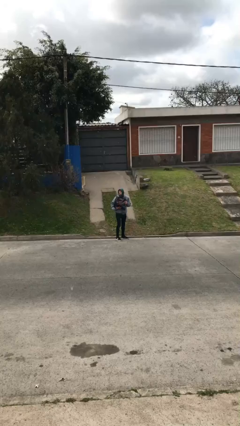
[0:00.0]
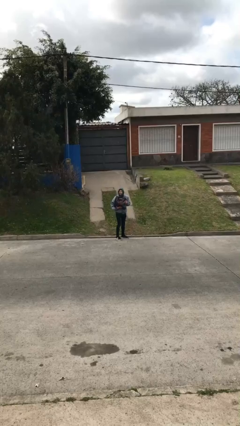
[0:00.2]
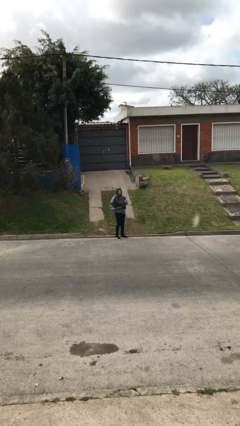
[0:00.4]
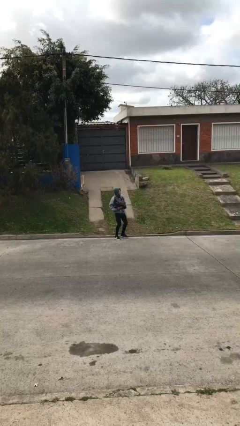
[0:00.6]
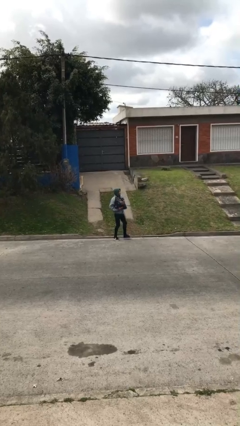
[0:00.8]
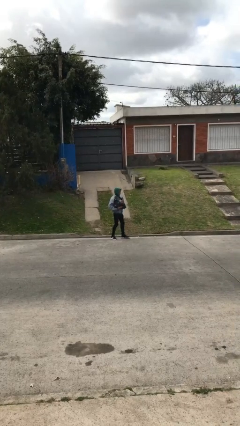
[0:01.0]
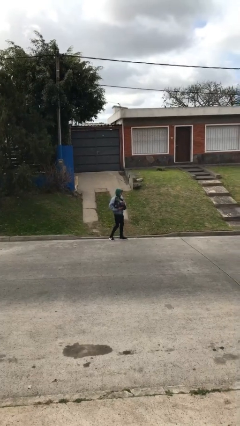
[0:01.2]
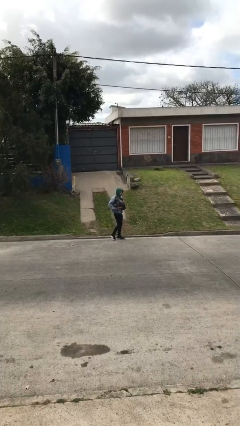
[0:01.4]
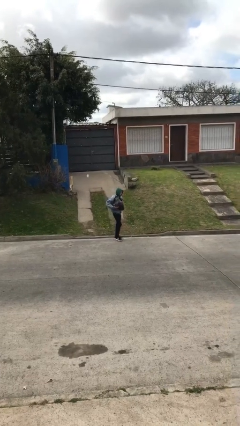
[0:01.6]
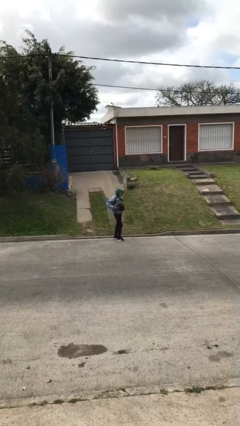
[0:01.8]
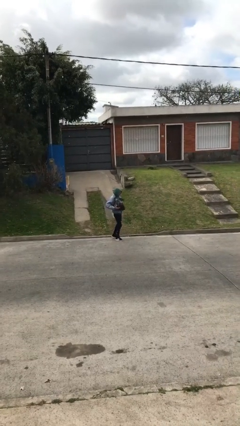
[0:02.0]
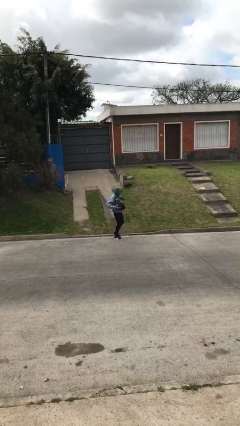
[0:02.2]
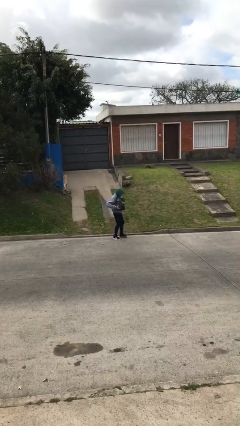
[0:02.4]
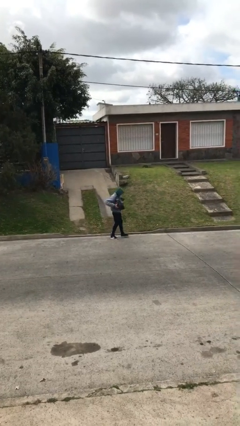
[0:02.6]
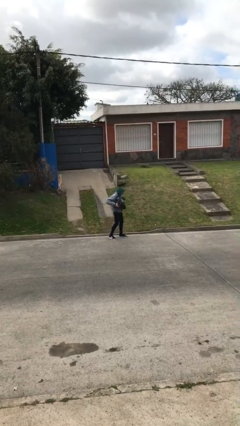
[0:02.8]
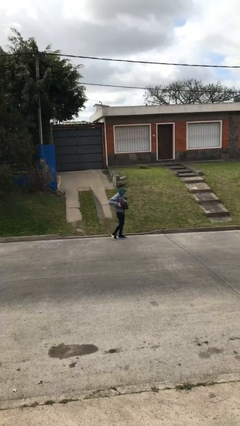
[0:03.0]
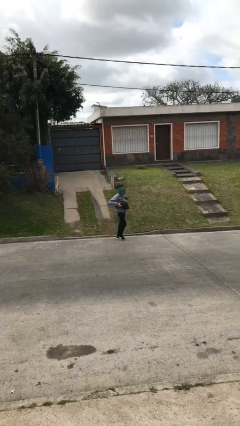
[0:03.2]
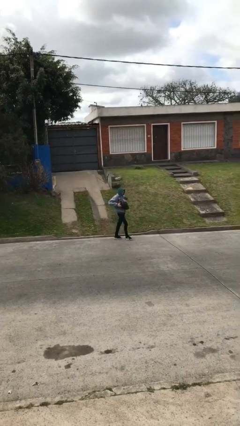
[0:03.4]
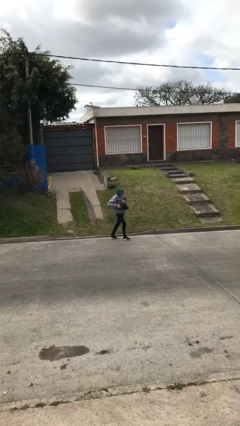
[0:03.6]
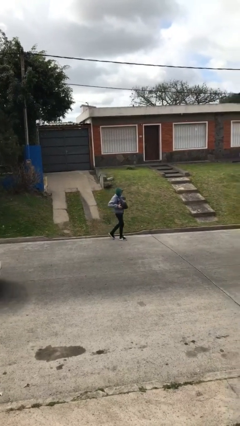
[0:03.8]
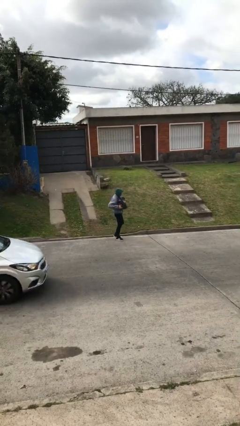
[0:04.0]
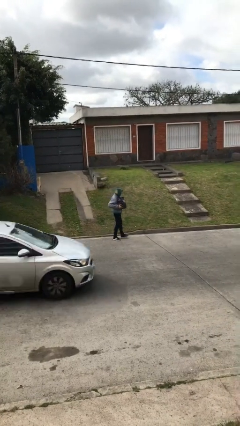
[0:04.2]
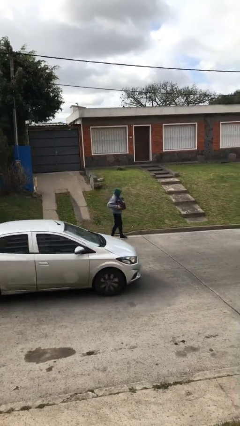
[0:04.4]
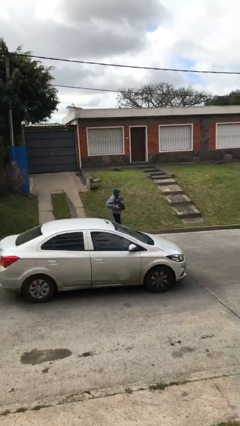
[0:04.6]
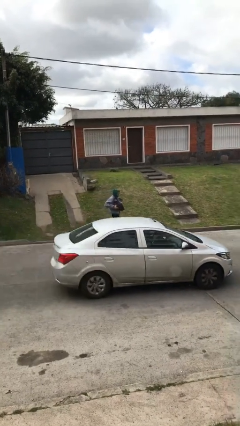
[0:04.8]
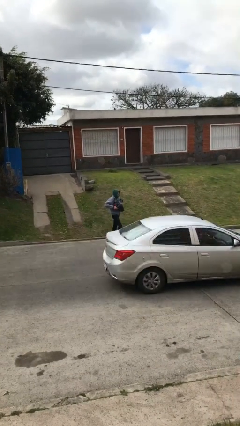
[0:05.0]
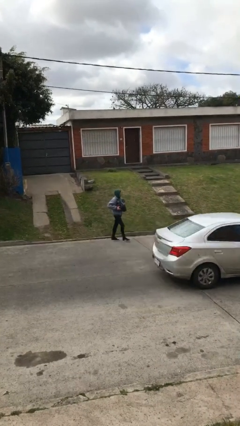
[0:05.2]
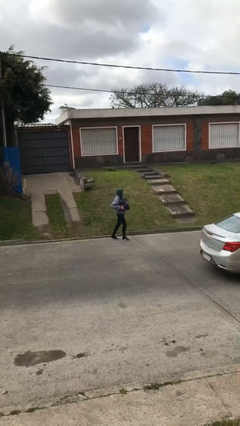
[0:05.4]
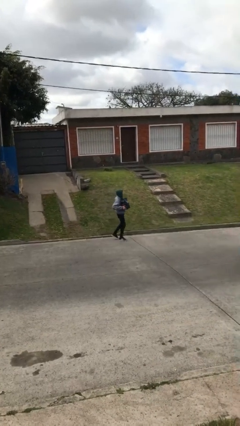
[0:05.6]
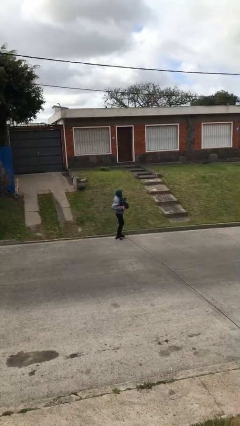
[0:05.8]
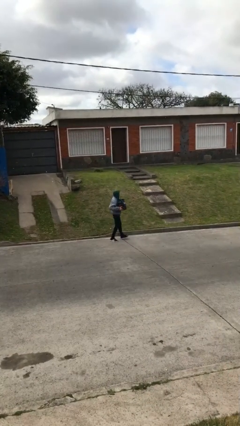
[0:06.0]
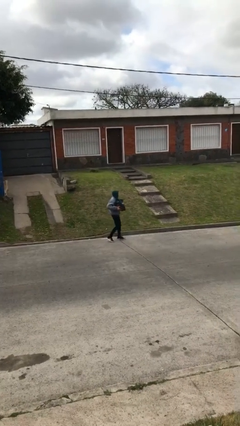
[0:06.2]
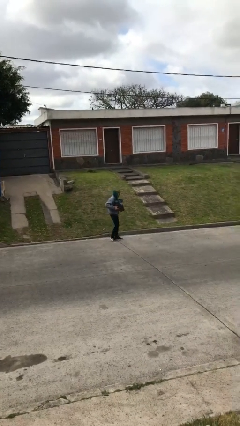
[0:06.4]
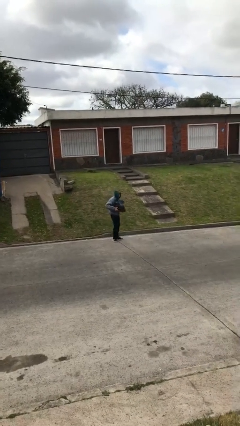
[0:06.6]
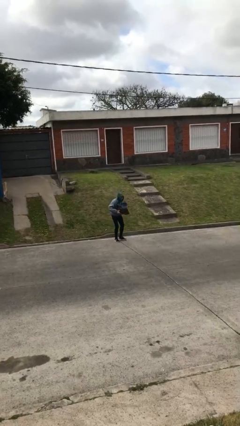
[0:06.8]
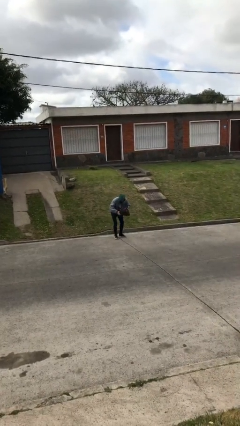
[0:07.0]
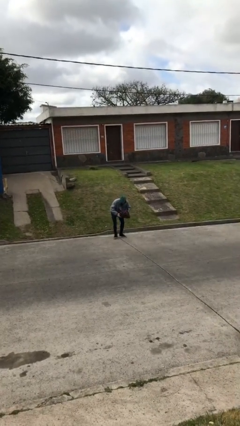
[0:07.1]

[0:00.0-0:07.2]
person carries heavy object

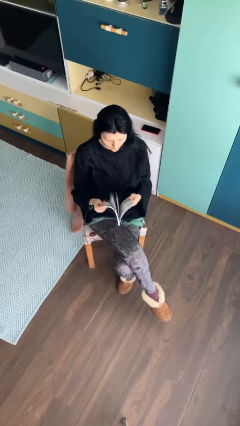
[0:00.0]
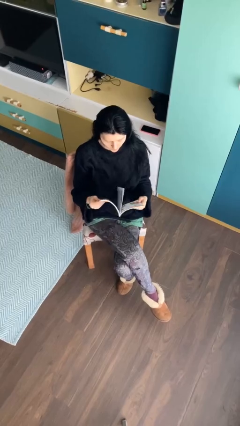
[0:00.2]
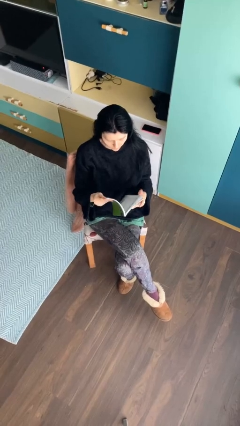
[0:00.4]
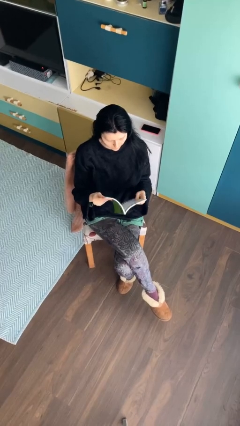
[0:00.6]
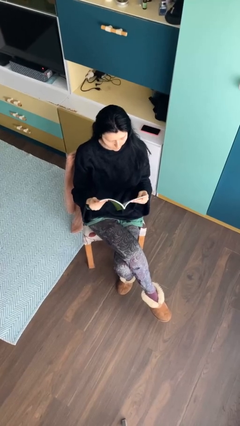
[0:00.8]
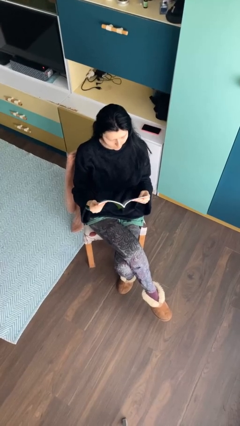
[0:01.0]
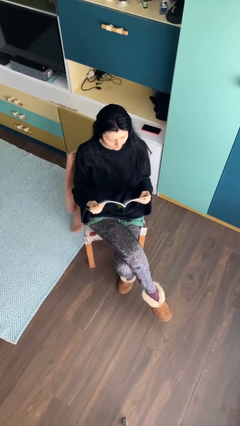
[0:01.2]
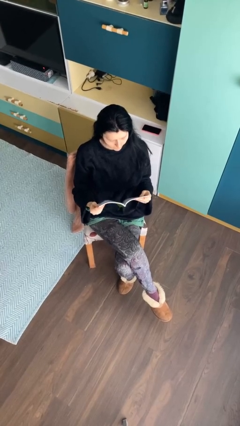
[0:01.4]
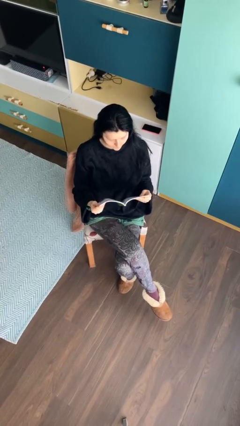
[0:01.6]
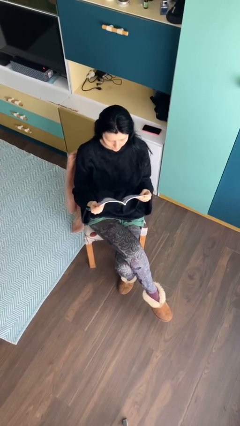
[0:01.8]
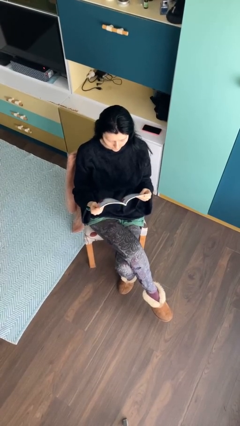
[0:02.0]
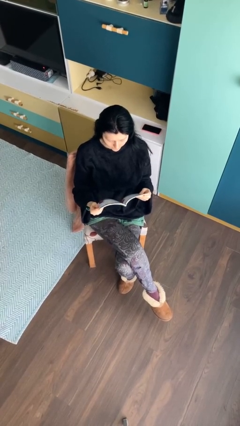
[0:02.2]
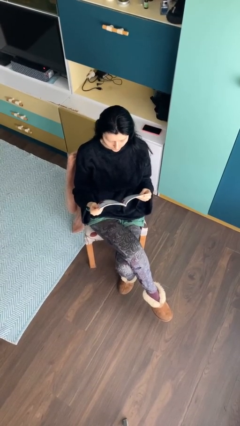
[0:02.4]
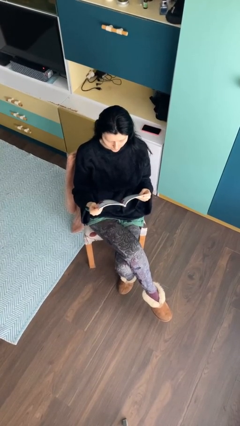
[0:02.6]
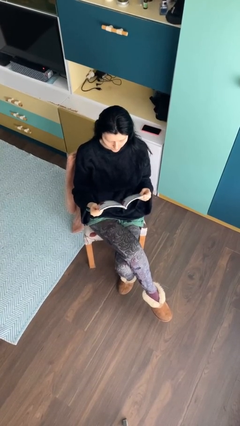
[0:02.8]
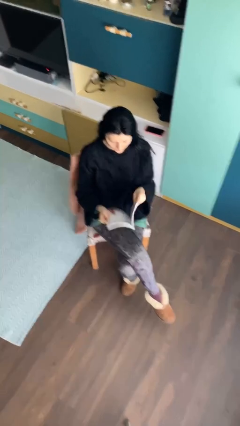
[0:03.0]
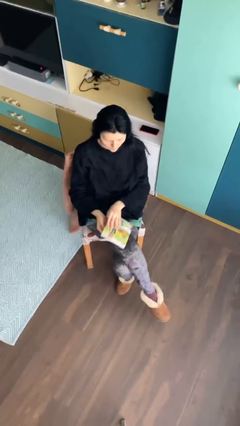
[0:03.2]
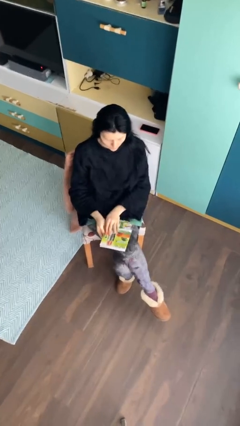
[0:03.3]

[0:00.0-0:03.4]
person reads document

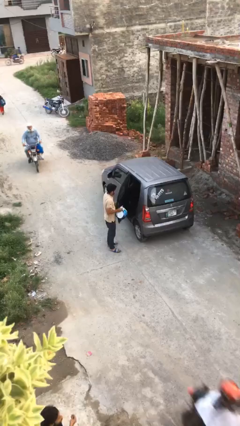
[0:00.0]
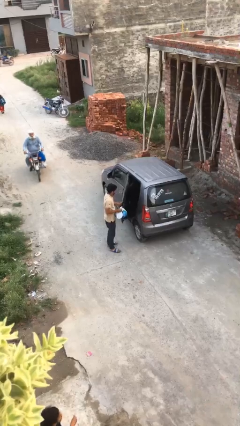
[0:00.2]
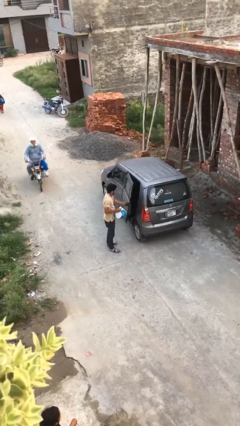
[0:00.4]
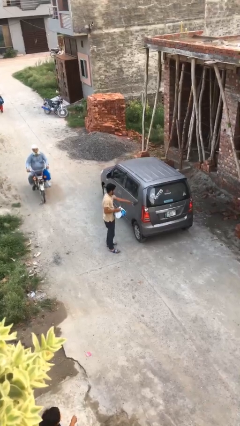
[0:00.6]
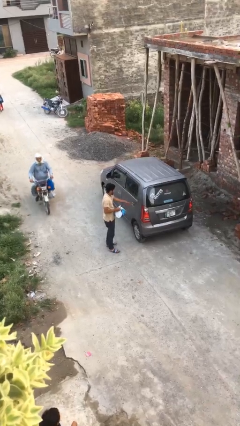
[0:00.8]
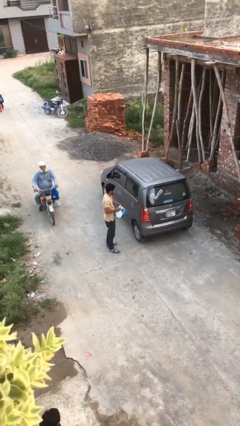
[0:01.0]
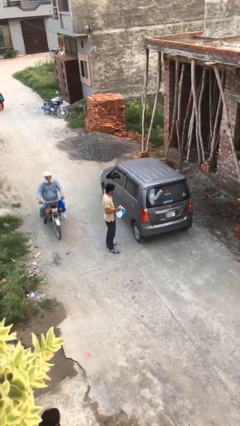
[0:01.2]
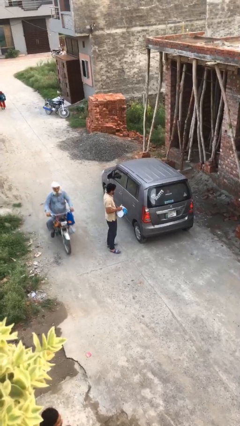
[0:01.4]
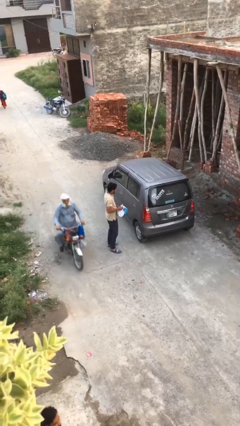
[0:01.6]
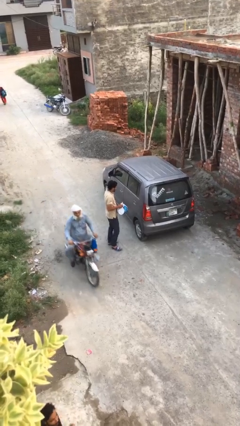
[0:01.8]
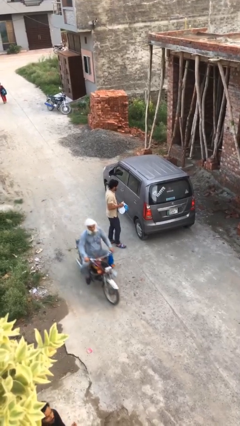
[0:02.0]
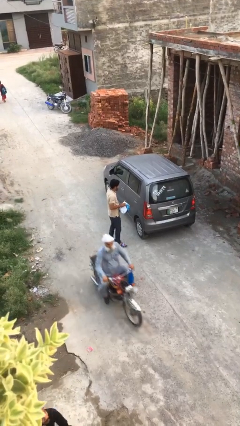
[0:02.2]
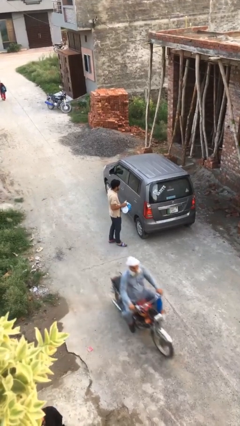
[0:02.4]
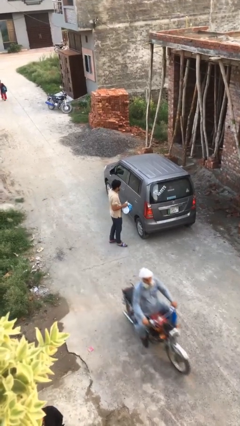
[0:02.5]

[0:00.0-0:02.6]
person closes car door

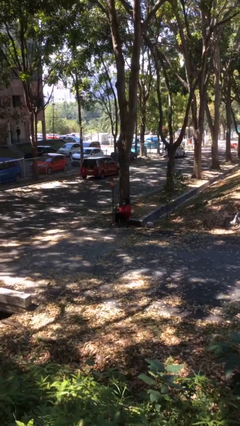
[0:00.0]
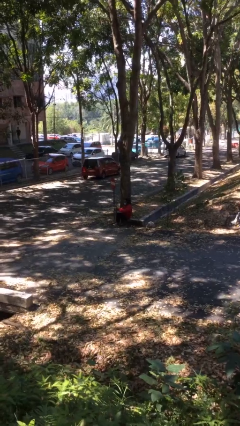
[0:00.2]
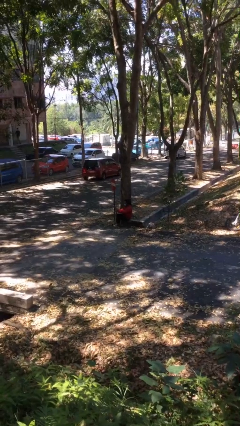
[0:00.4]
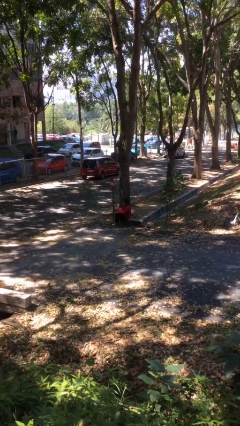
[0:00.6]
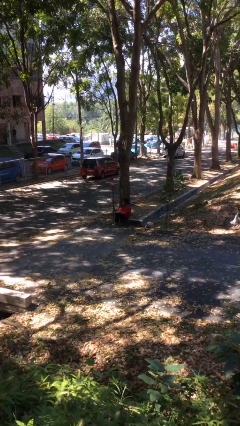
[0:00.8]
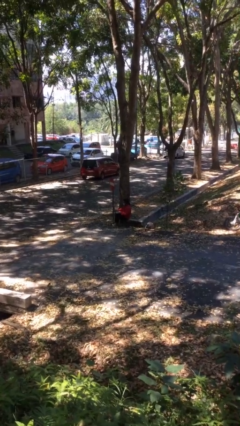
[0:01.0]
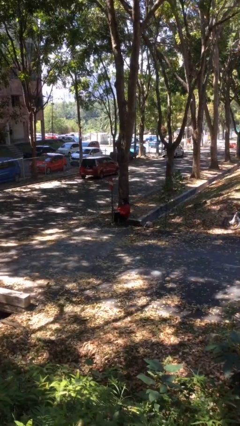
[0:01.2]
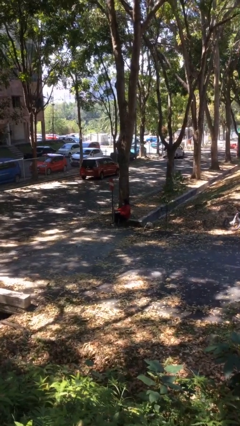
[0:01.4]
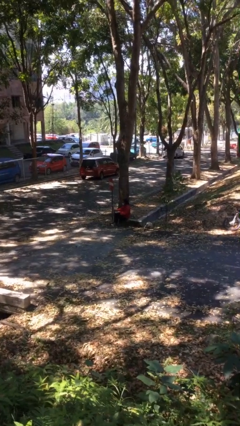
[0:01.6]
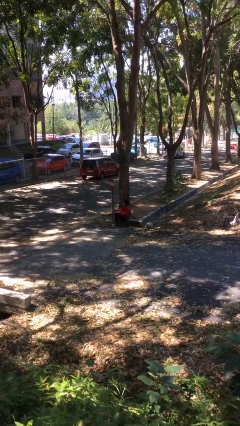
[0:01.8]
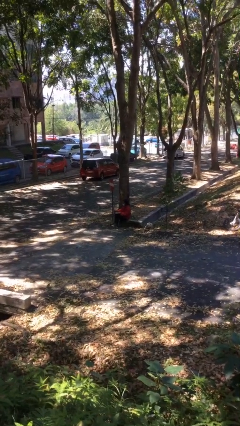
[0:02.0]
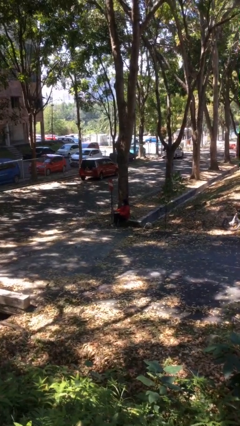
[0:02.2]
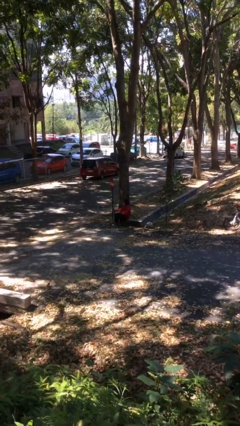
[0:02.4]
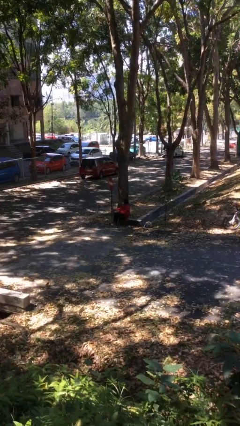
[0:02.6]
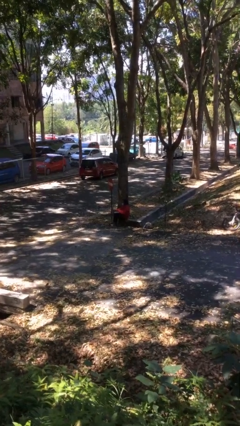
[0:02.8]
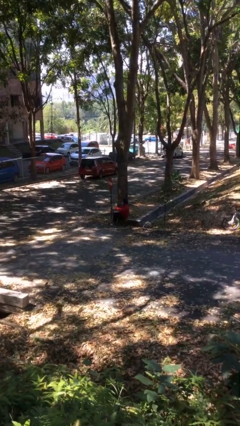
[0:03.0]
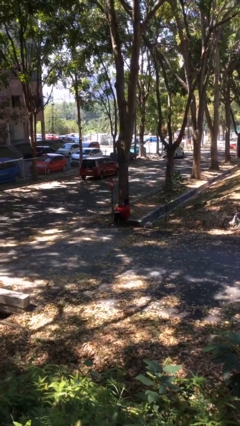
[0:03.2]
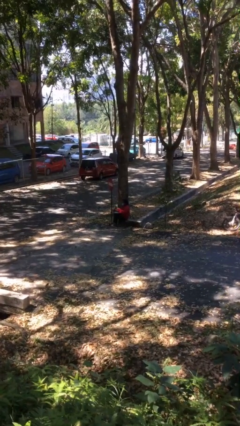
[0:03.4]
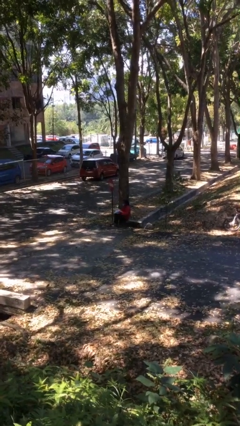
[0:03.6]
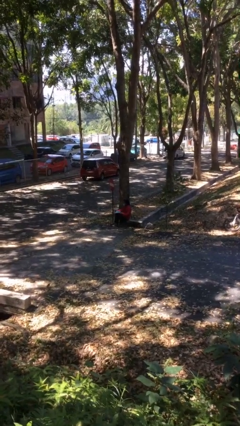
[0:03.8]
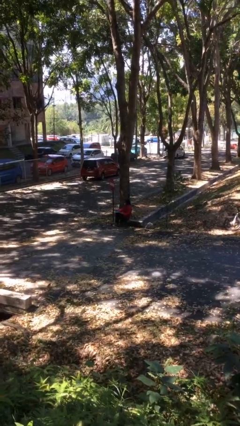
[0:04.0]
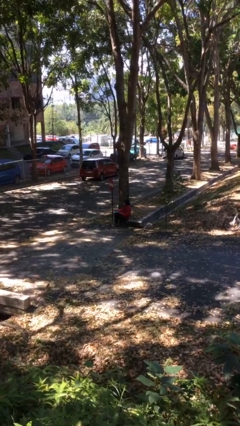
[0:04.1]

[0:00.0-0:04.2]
person interacts with laptop

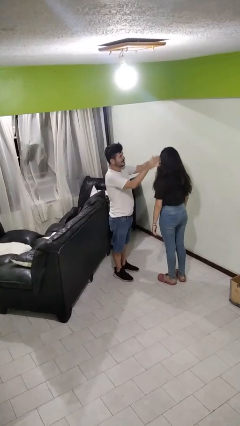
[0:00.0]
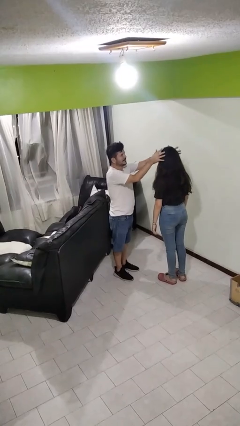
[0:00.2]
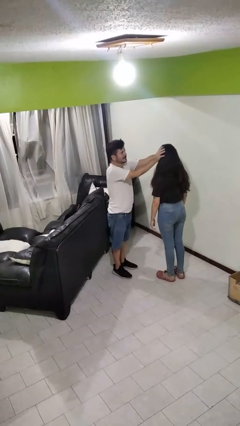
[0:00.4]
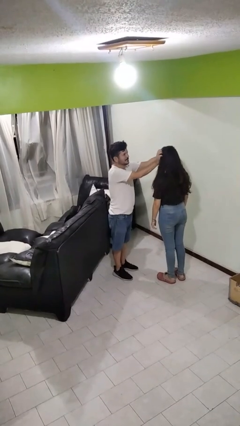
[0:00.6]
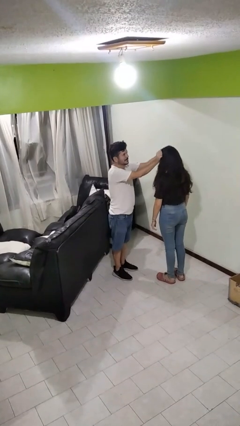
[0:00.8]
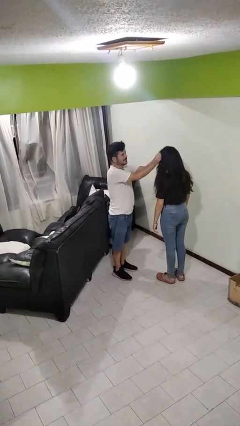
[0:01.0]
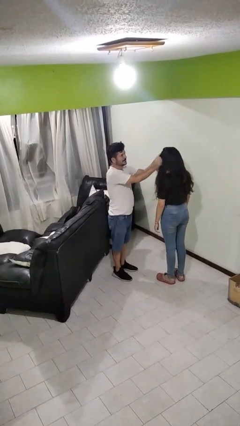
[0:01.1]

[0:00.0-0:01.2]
person grabs person by hair
